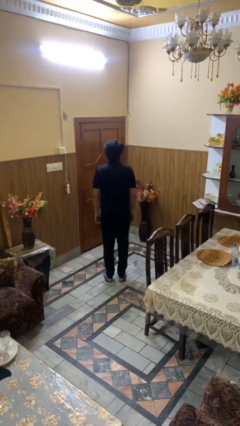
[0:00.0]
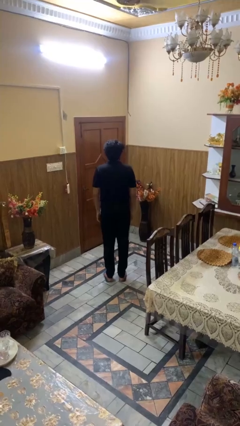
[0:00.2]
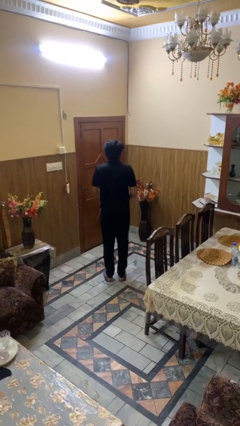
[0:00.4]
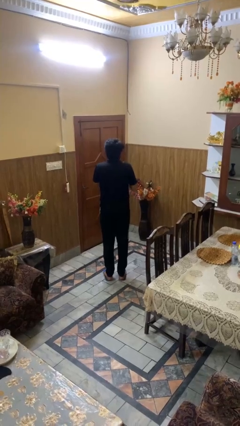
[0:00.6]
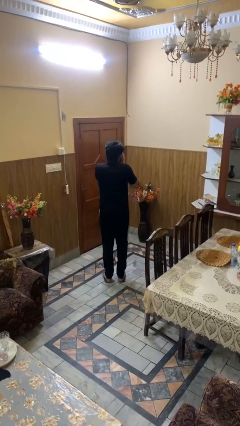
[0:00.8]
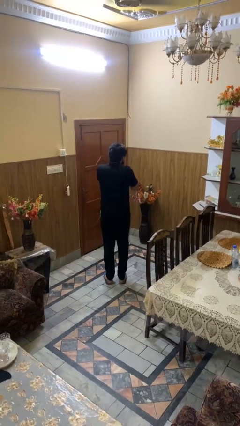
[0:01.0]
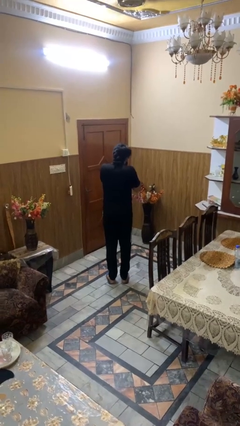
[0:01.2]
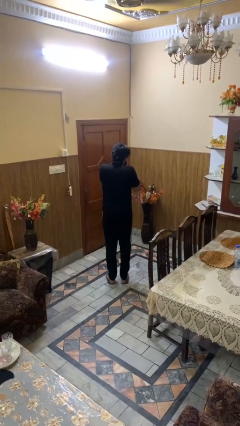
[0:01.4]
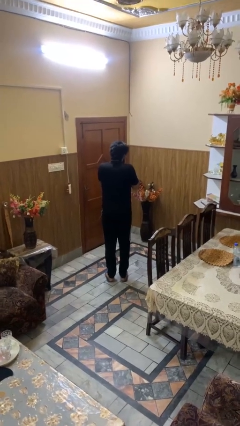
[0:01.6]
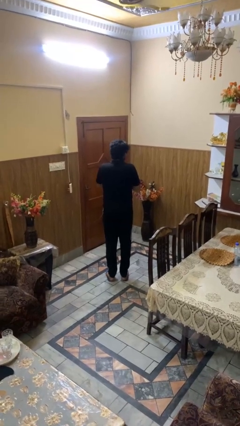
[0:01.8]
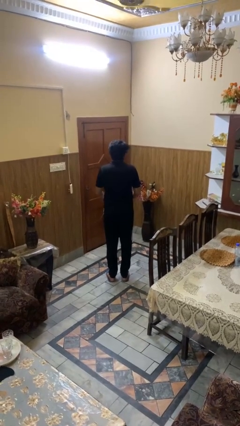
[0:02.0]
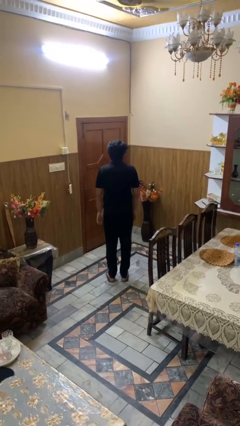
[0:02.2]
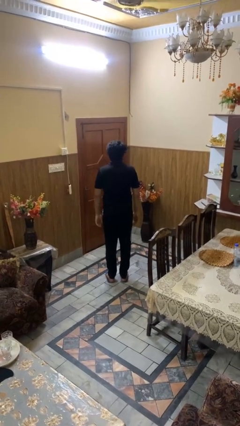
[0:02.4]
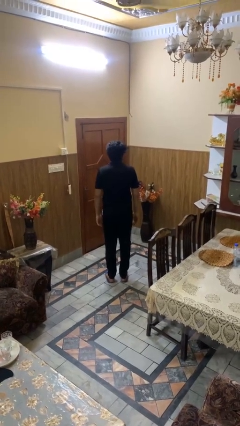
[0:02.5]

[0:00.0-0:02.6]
person sneezes into hand

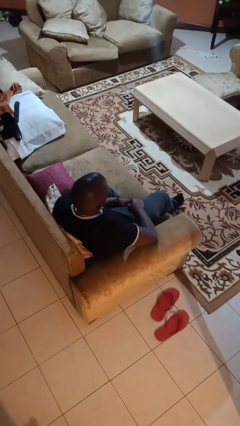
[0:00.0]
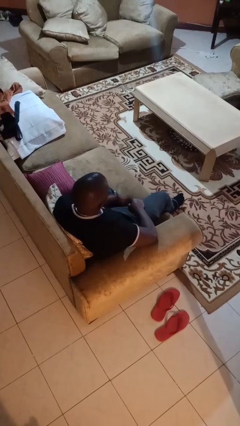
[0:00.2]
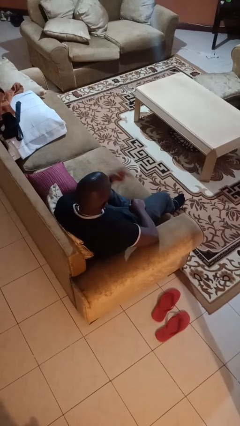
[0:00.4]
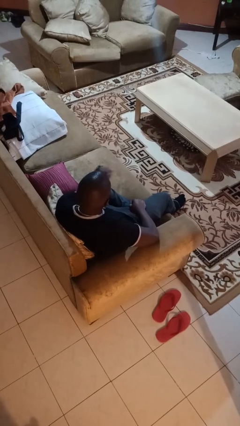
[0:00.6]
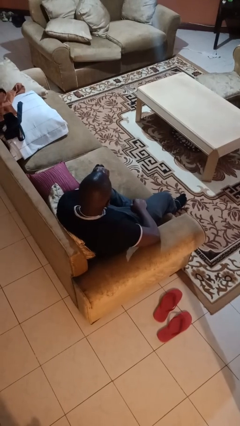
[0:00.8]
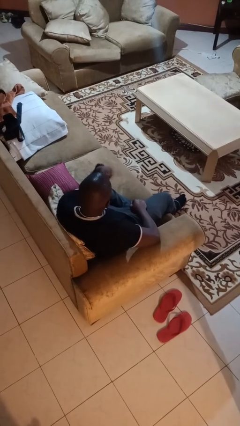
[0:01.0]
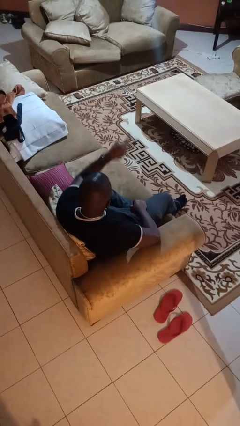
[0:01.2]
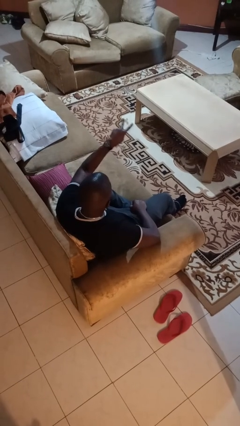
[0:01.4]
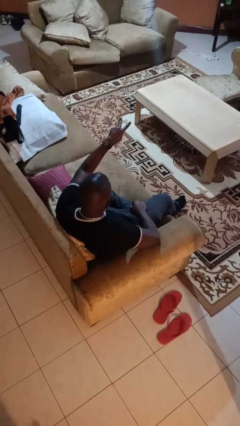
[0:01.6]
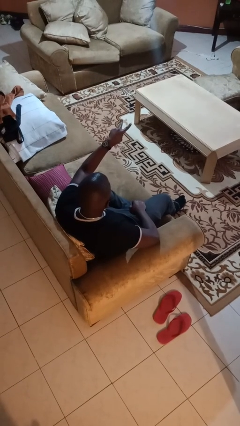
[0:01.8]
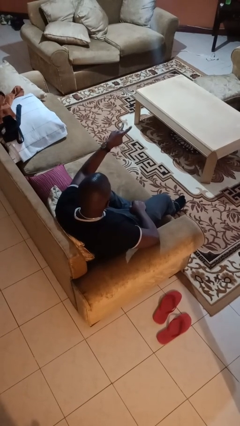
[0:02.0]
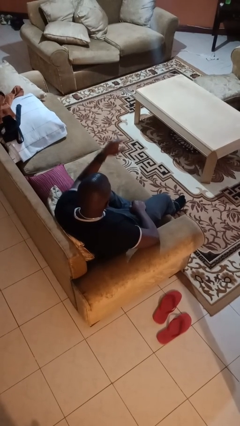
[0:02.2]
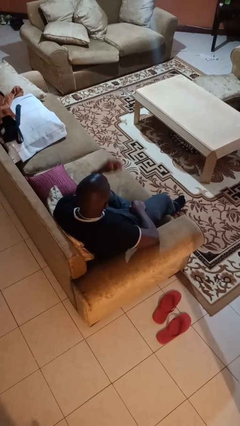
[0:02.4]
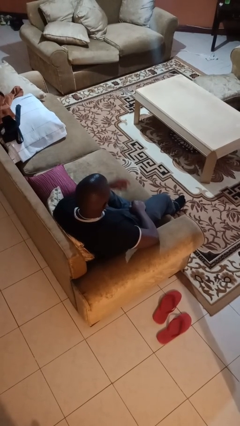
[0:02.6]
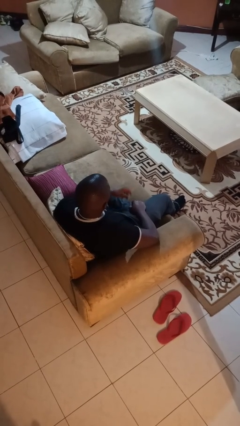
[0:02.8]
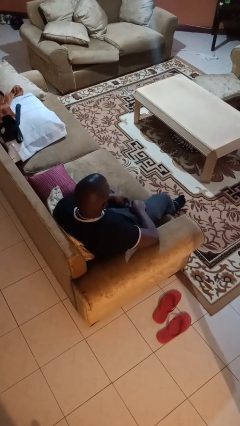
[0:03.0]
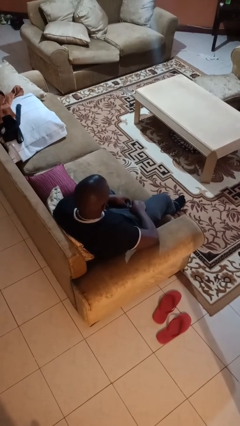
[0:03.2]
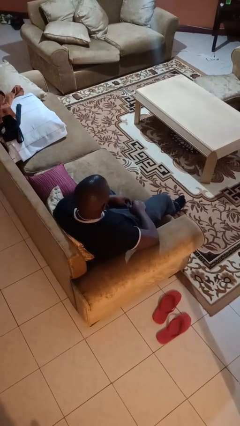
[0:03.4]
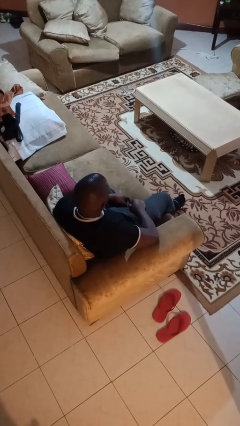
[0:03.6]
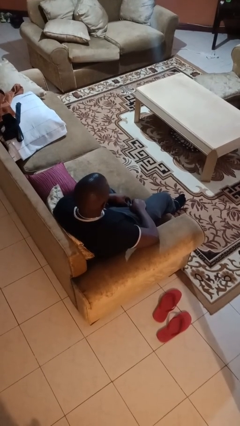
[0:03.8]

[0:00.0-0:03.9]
person gestures watch closely

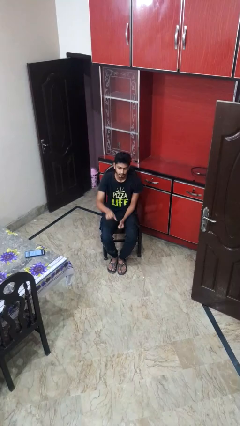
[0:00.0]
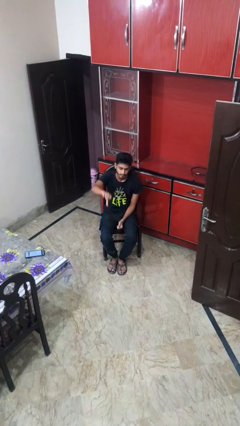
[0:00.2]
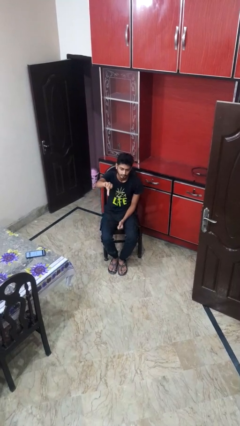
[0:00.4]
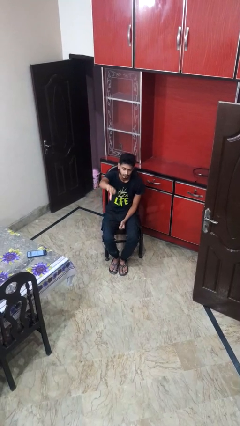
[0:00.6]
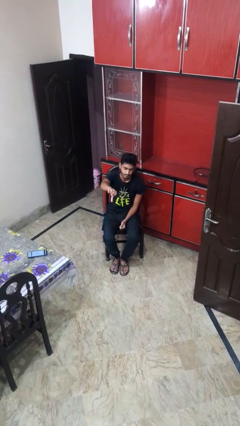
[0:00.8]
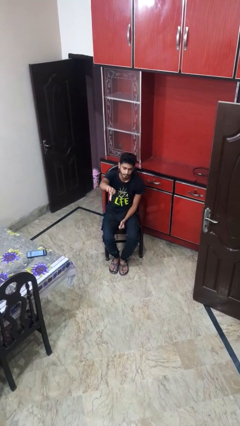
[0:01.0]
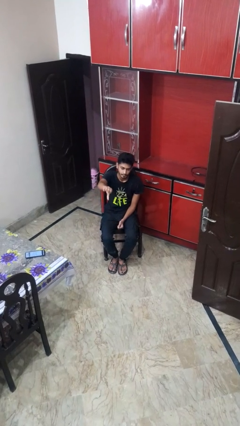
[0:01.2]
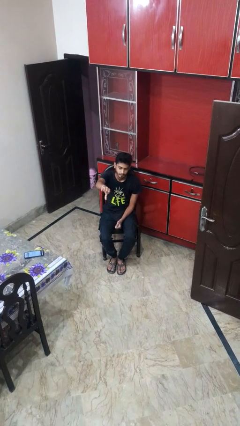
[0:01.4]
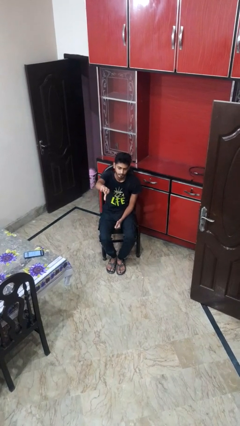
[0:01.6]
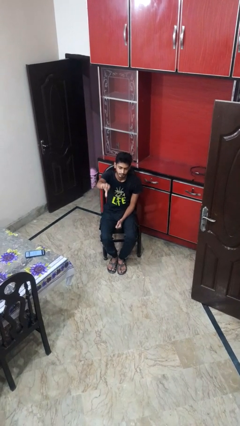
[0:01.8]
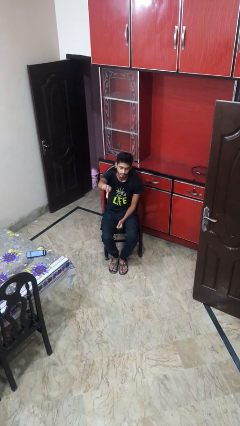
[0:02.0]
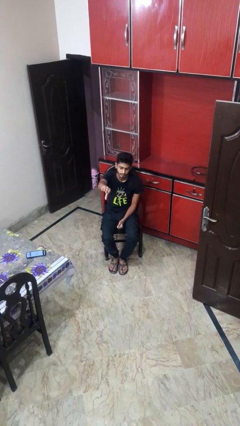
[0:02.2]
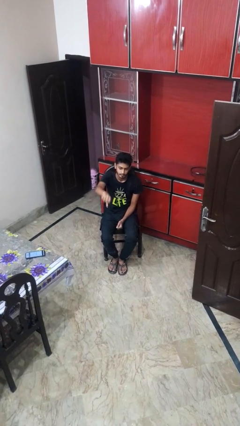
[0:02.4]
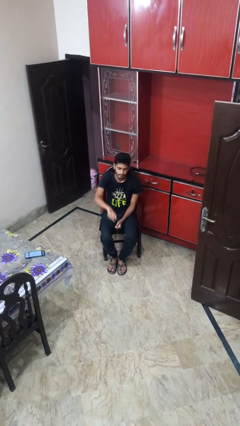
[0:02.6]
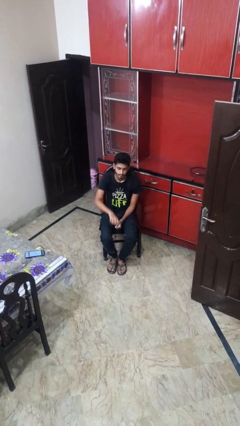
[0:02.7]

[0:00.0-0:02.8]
person gestures thumbs down

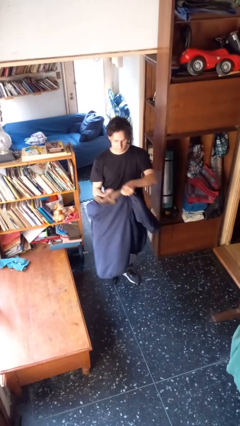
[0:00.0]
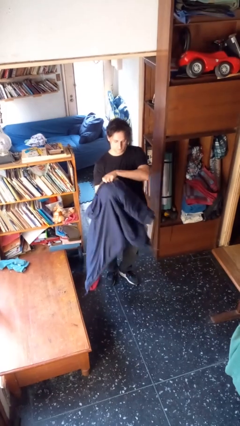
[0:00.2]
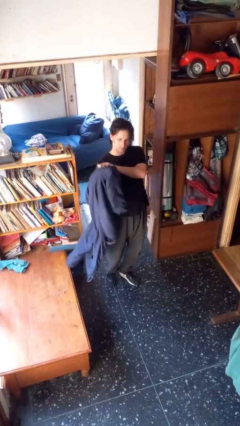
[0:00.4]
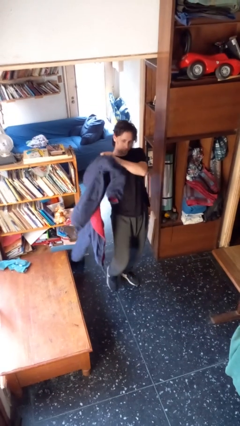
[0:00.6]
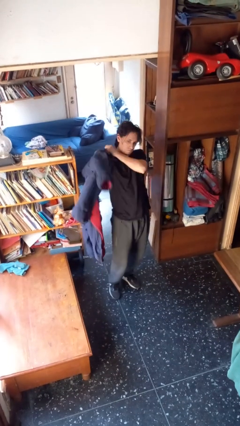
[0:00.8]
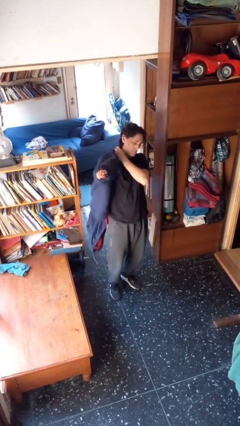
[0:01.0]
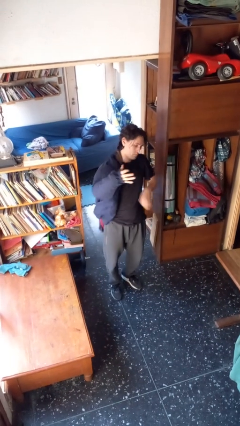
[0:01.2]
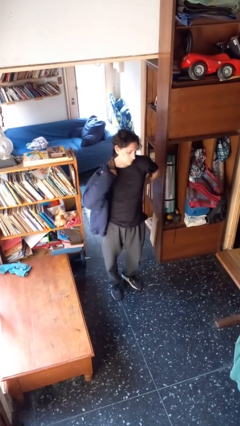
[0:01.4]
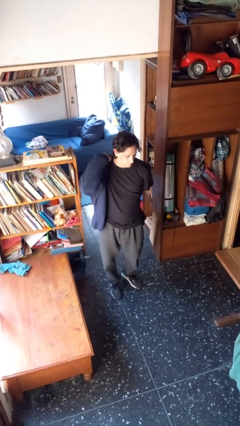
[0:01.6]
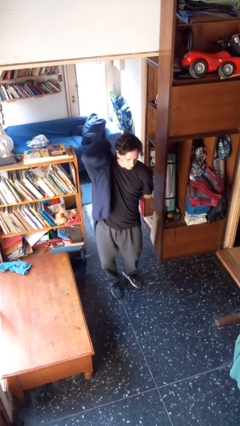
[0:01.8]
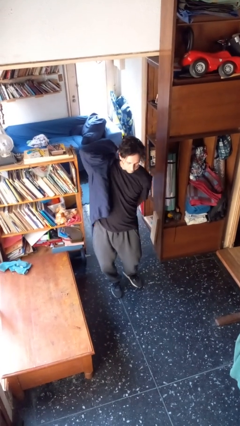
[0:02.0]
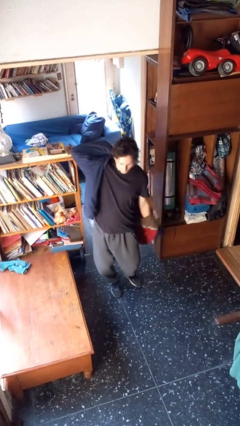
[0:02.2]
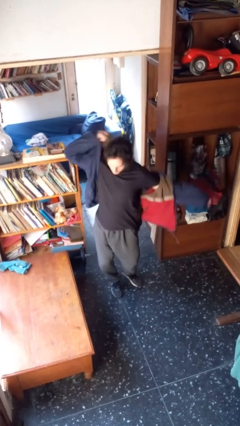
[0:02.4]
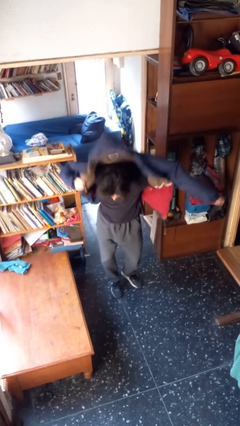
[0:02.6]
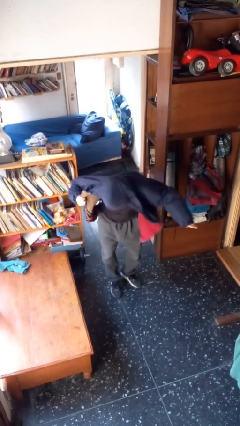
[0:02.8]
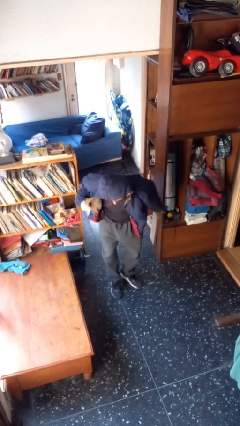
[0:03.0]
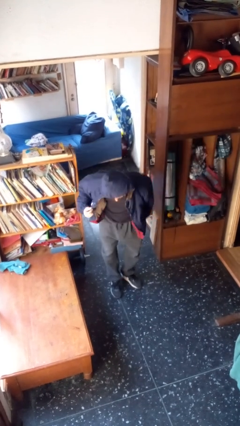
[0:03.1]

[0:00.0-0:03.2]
person puts on hoodie

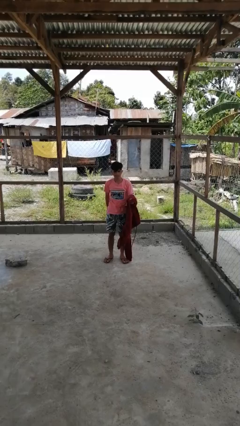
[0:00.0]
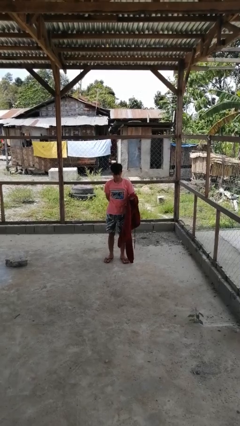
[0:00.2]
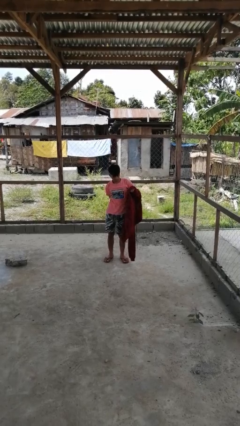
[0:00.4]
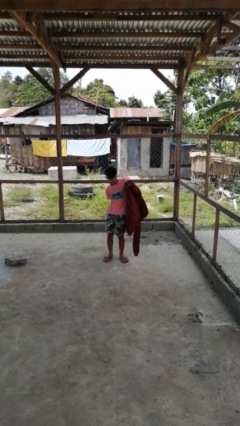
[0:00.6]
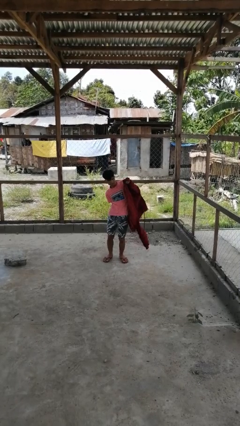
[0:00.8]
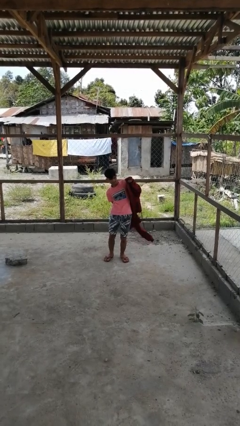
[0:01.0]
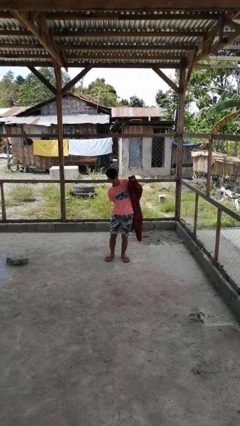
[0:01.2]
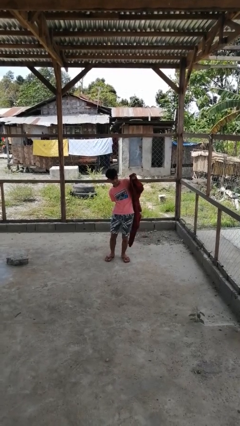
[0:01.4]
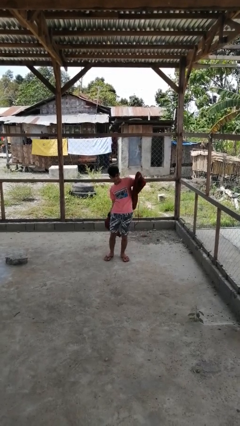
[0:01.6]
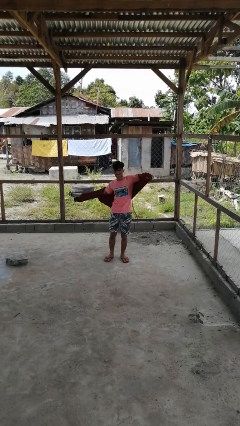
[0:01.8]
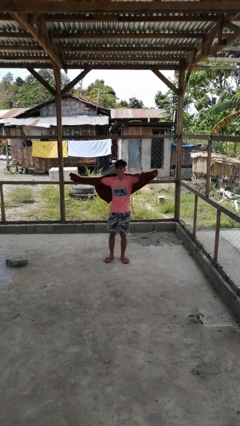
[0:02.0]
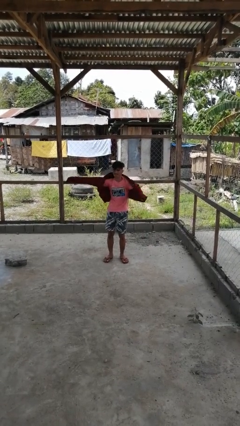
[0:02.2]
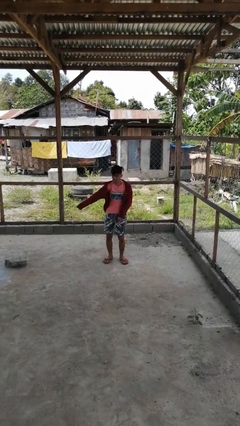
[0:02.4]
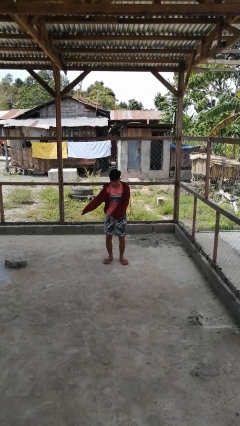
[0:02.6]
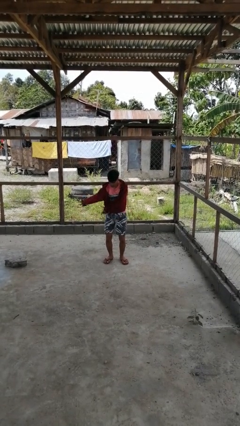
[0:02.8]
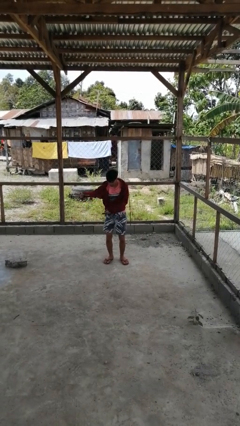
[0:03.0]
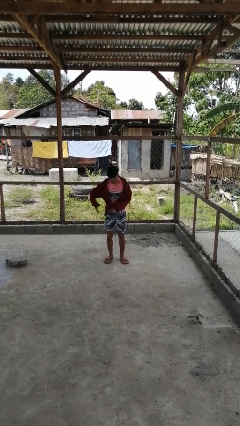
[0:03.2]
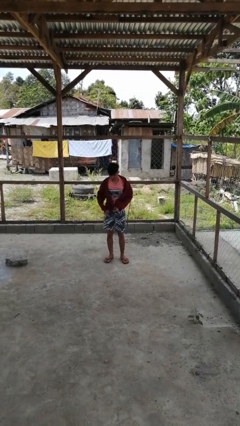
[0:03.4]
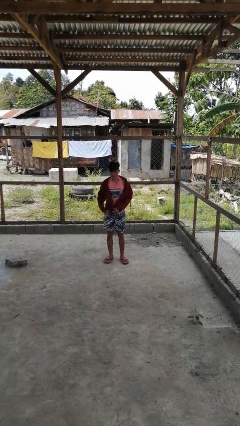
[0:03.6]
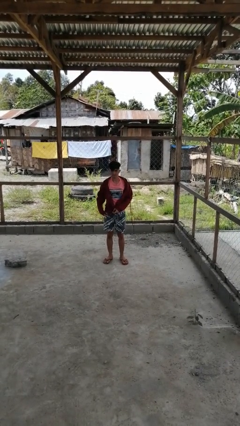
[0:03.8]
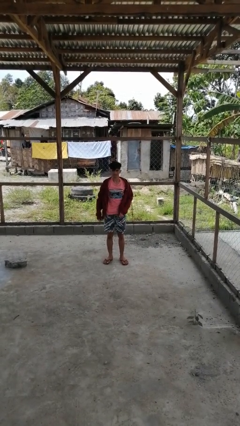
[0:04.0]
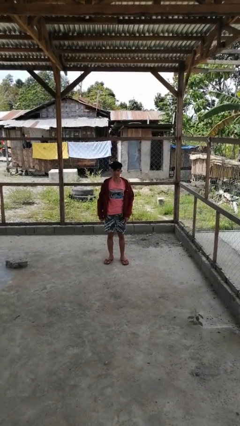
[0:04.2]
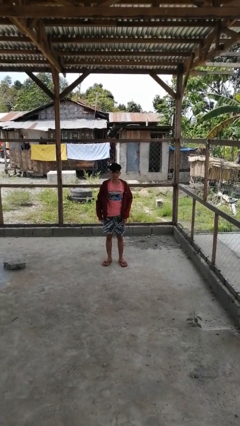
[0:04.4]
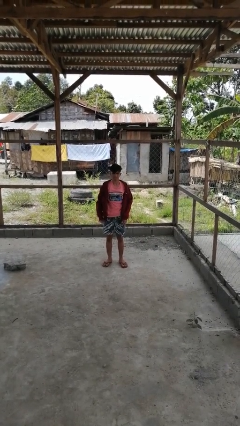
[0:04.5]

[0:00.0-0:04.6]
person puts on jacket

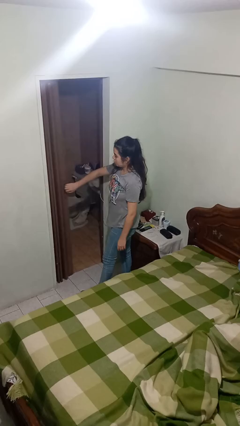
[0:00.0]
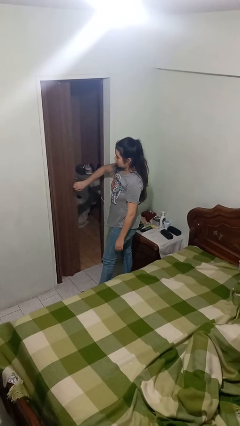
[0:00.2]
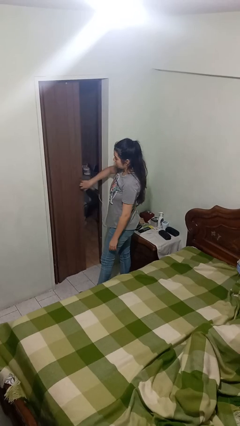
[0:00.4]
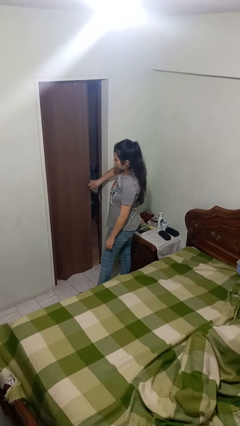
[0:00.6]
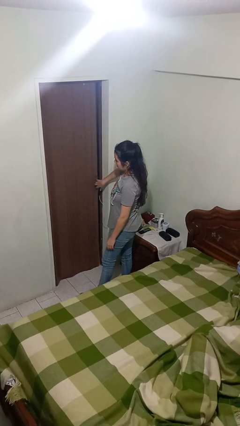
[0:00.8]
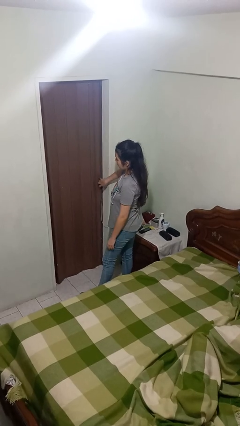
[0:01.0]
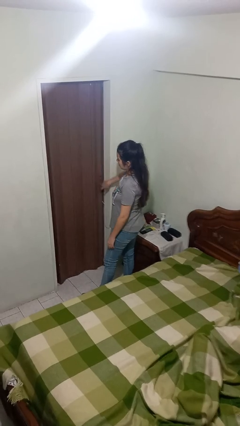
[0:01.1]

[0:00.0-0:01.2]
person closes sliding door
